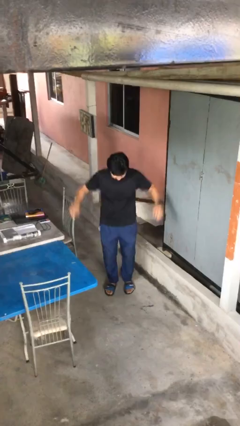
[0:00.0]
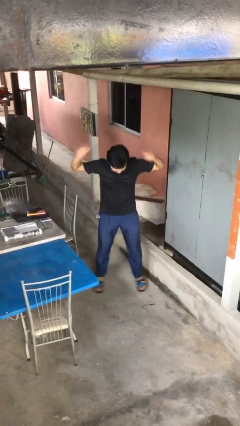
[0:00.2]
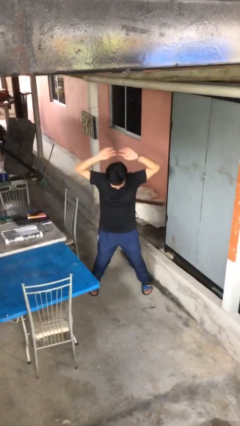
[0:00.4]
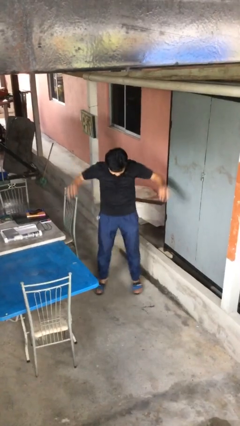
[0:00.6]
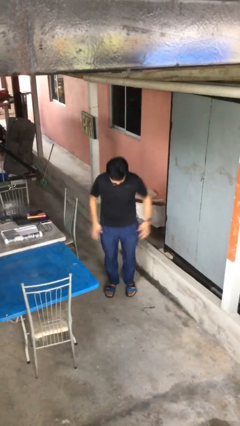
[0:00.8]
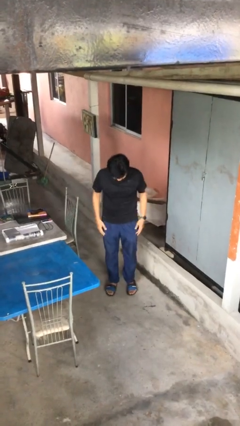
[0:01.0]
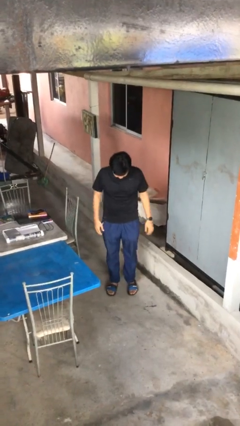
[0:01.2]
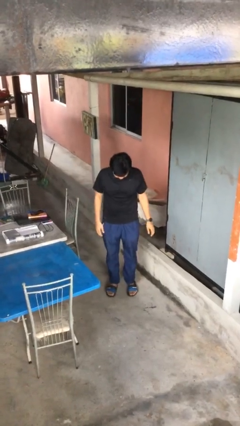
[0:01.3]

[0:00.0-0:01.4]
person exercises with jumping jacks

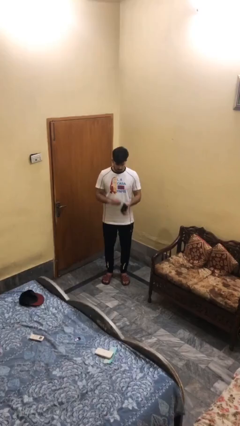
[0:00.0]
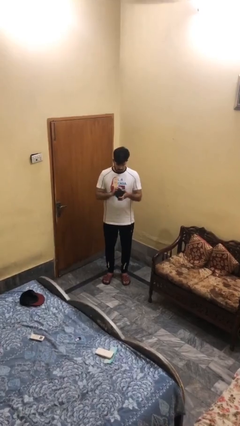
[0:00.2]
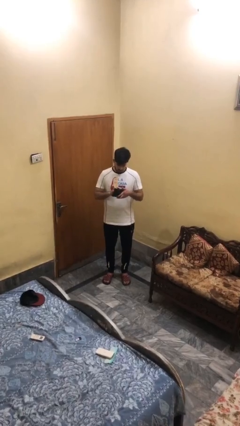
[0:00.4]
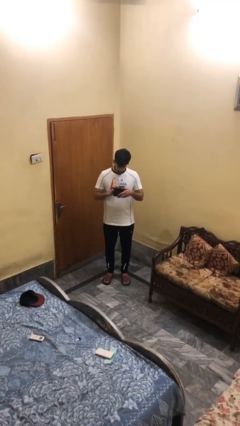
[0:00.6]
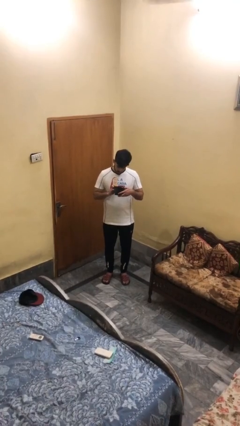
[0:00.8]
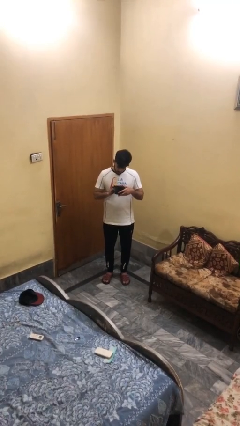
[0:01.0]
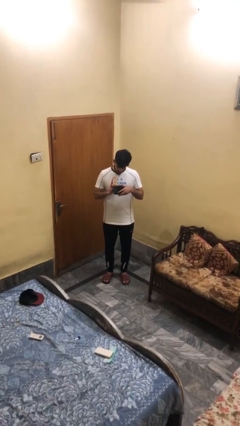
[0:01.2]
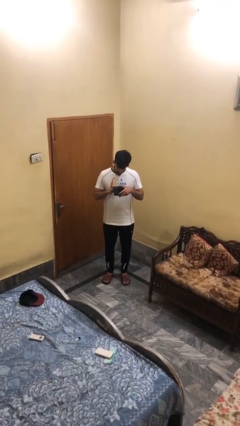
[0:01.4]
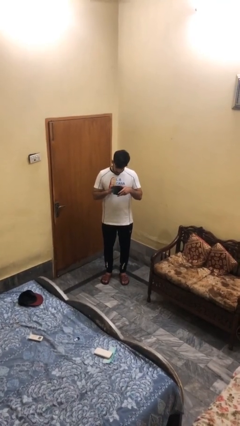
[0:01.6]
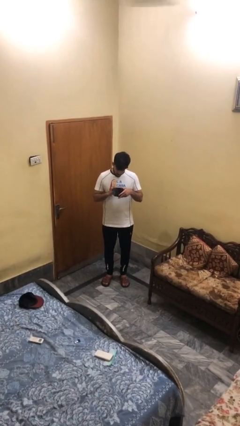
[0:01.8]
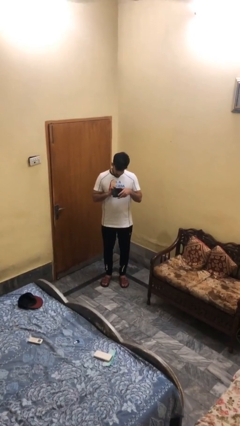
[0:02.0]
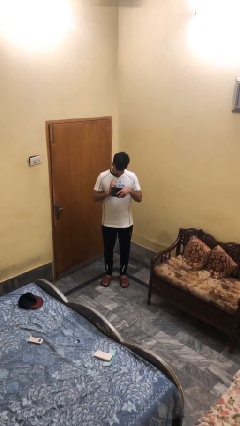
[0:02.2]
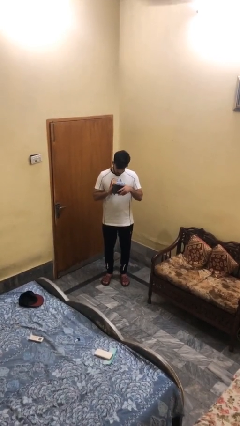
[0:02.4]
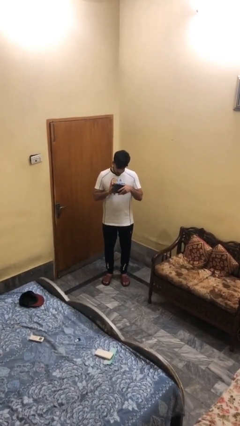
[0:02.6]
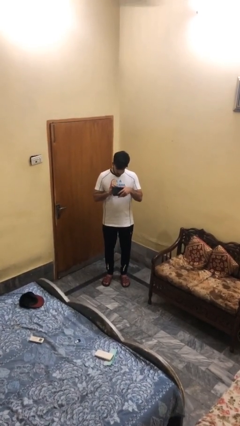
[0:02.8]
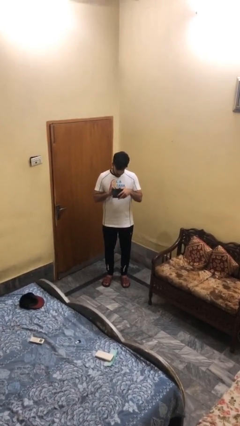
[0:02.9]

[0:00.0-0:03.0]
person searches in purse

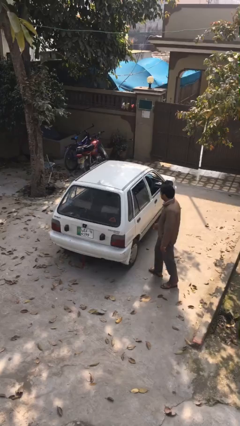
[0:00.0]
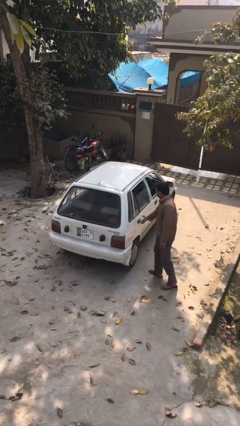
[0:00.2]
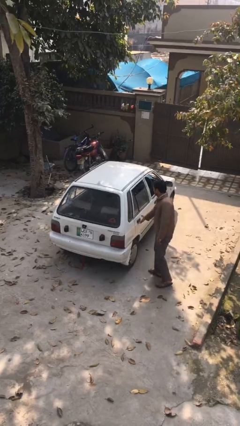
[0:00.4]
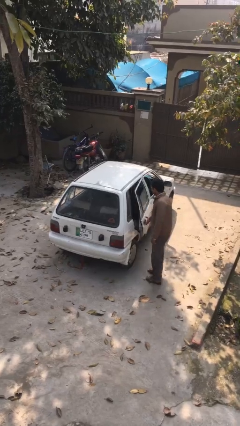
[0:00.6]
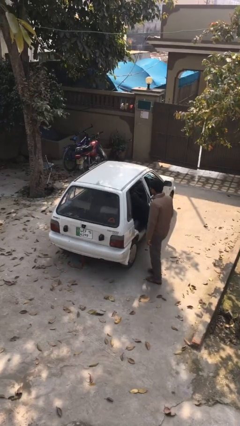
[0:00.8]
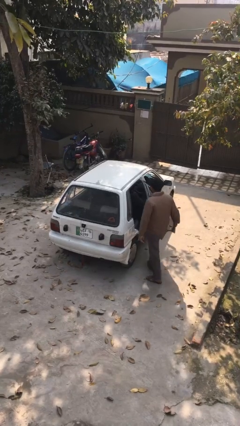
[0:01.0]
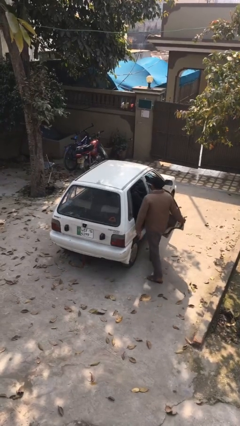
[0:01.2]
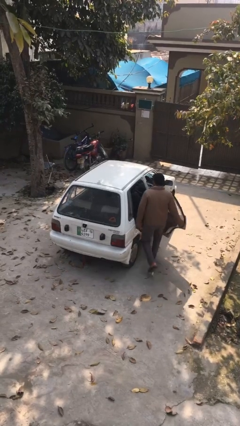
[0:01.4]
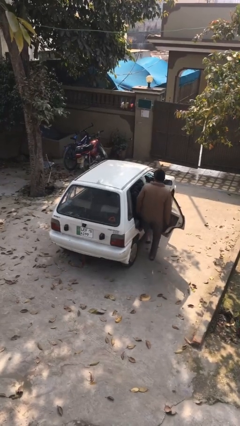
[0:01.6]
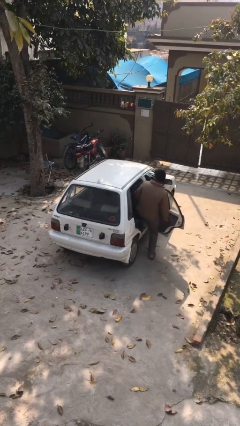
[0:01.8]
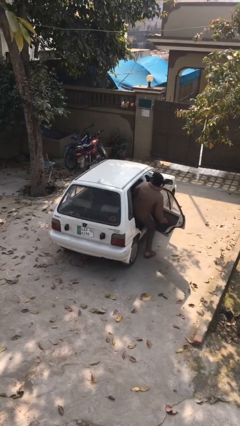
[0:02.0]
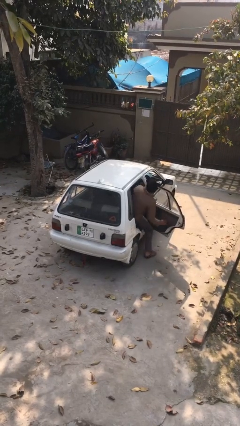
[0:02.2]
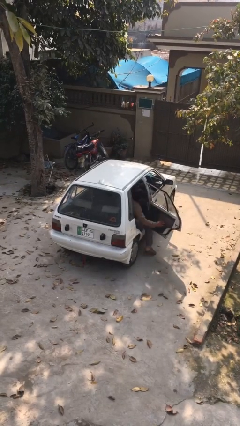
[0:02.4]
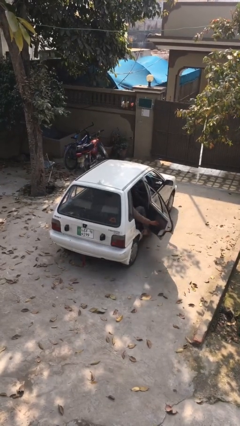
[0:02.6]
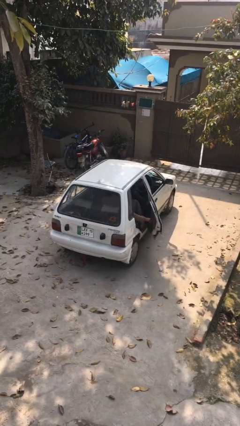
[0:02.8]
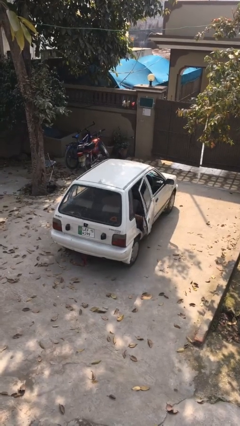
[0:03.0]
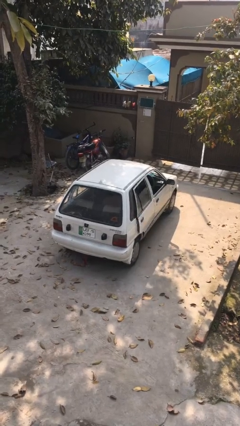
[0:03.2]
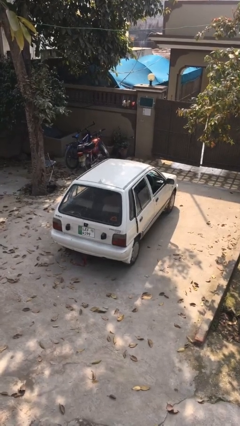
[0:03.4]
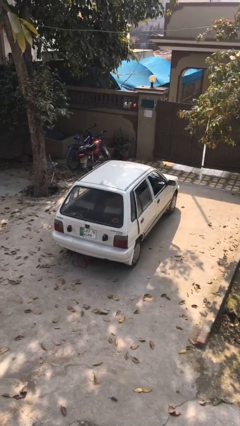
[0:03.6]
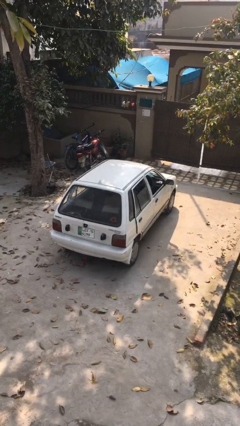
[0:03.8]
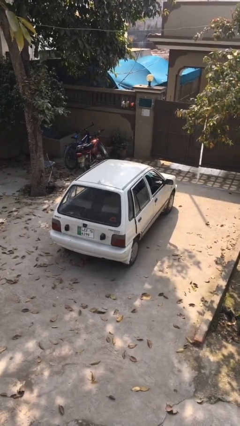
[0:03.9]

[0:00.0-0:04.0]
car picks up person

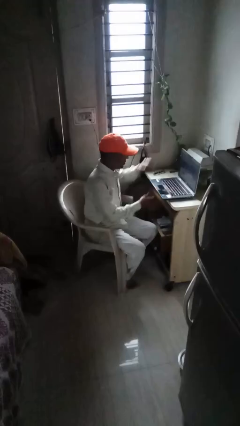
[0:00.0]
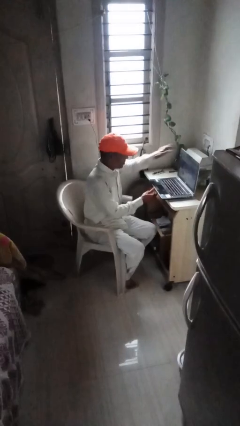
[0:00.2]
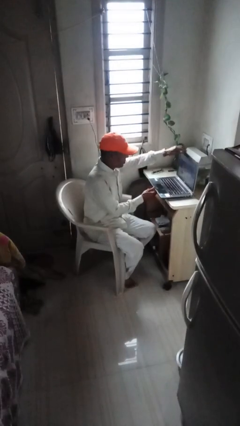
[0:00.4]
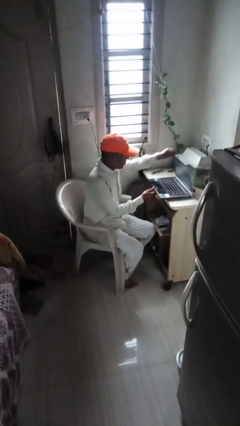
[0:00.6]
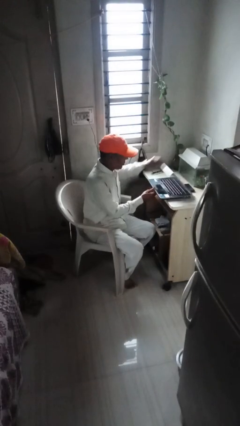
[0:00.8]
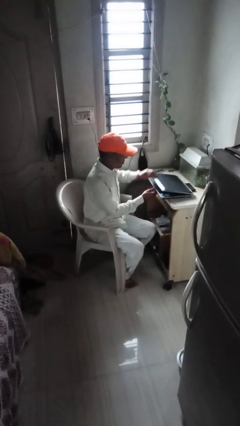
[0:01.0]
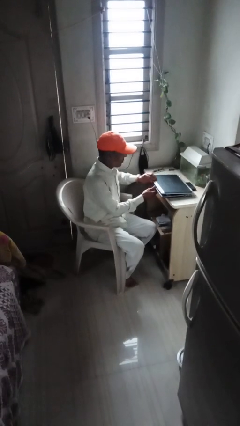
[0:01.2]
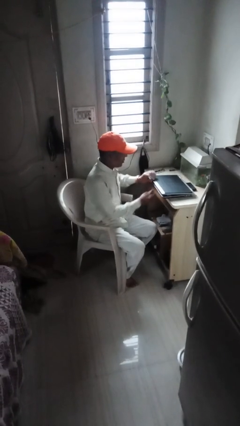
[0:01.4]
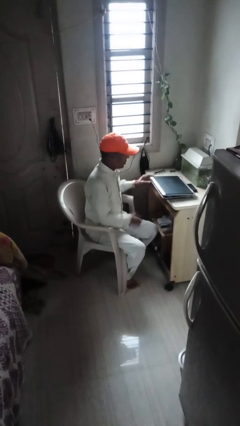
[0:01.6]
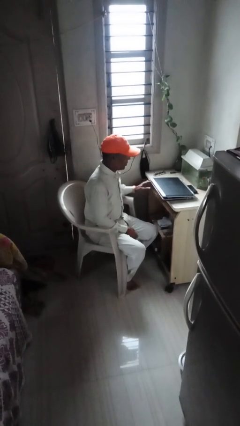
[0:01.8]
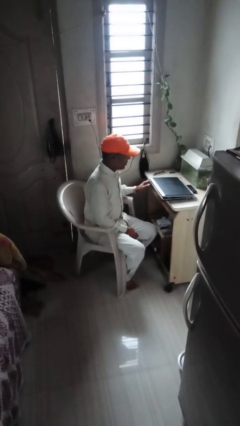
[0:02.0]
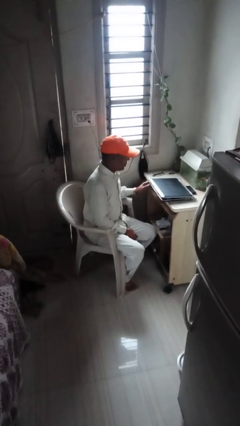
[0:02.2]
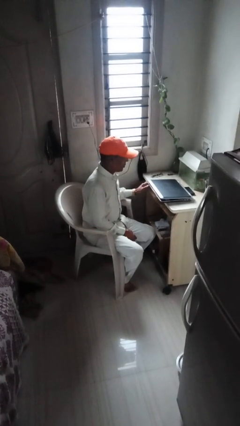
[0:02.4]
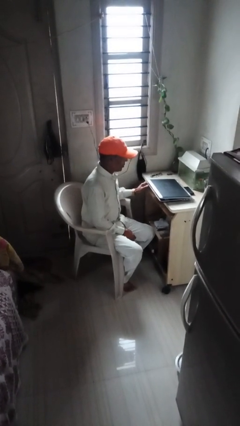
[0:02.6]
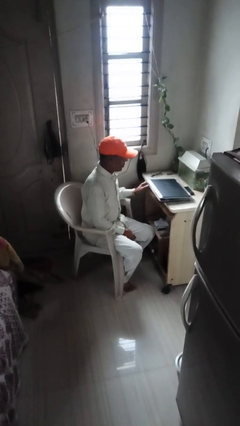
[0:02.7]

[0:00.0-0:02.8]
person closes laptop

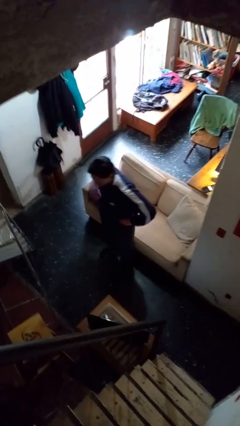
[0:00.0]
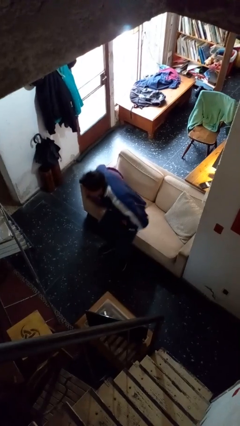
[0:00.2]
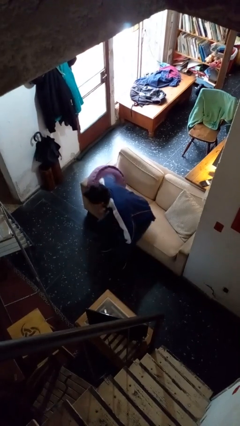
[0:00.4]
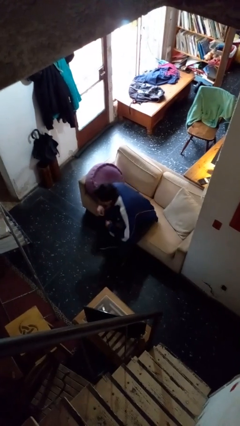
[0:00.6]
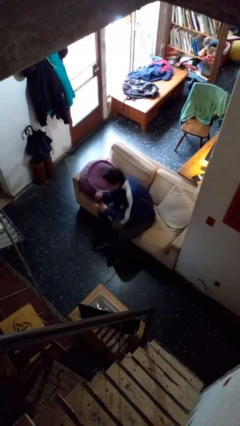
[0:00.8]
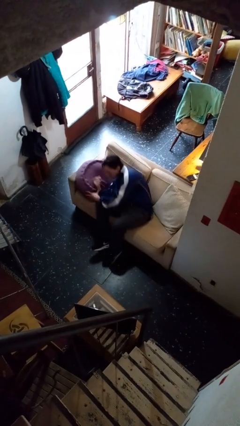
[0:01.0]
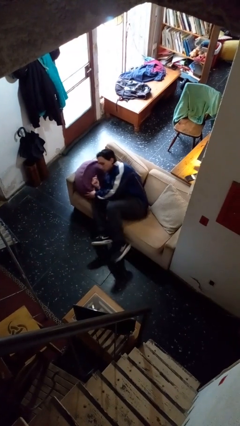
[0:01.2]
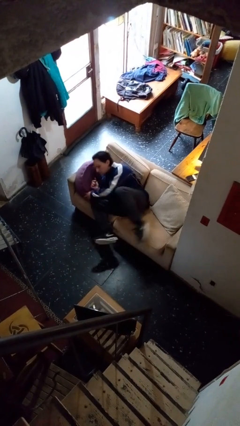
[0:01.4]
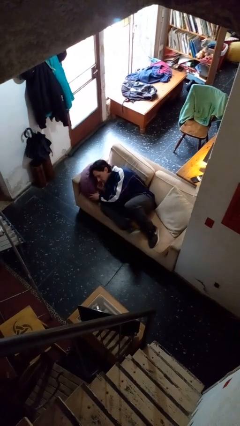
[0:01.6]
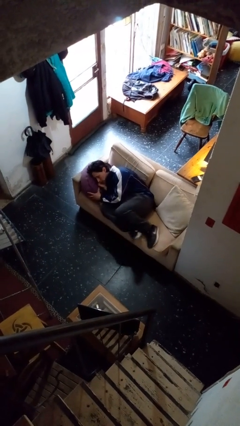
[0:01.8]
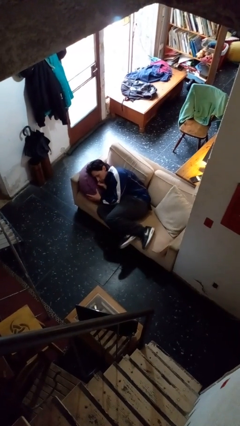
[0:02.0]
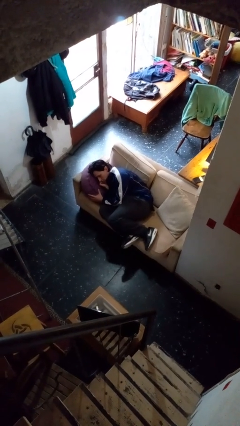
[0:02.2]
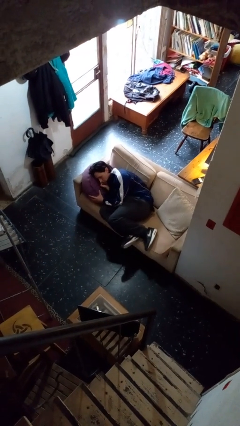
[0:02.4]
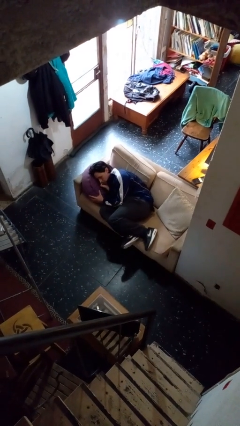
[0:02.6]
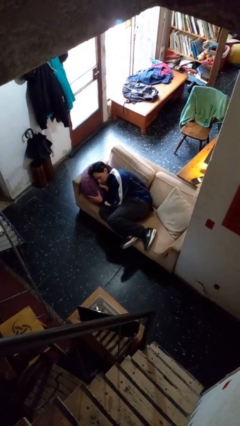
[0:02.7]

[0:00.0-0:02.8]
person lies down on couch

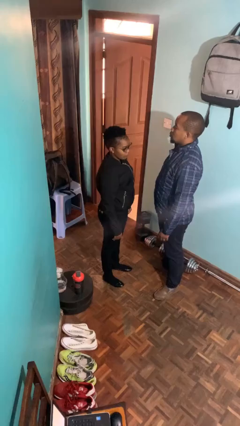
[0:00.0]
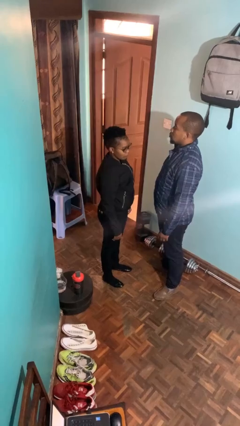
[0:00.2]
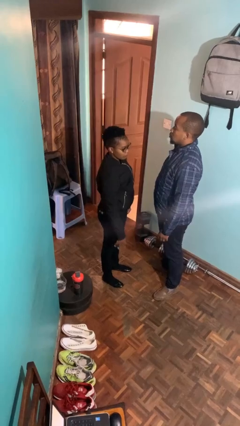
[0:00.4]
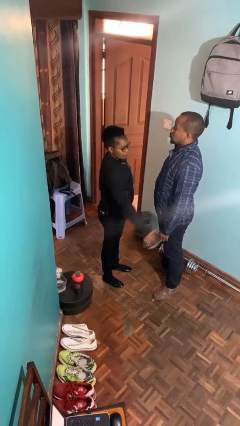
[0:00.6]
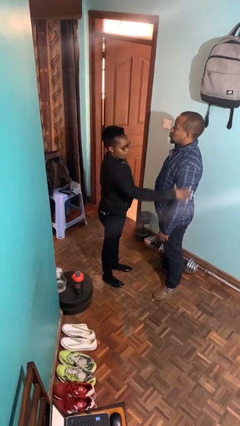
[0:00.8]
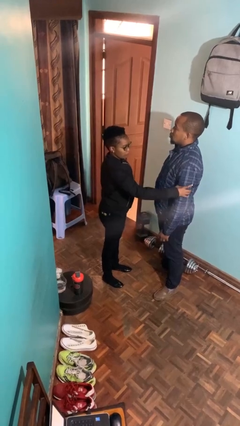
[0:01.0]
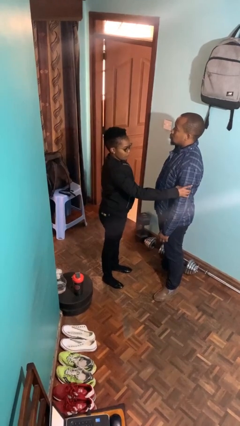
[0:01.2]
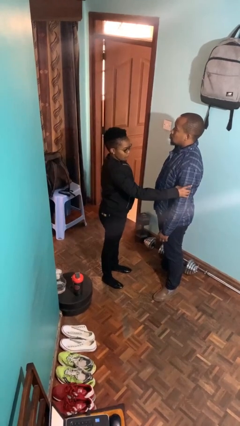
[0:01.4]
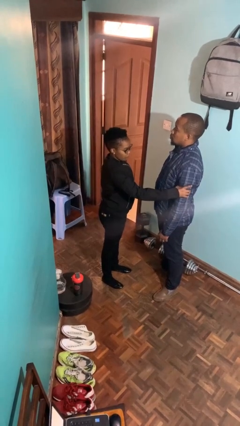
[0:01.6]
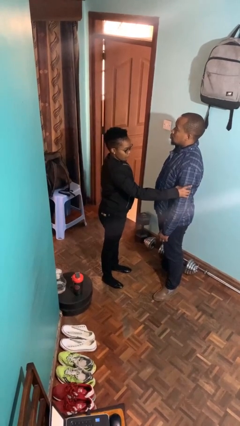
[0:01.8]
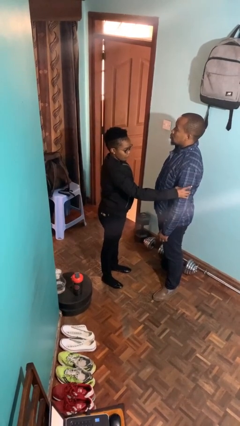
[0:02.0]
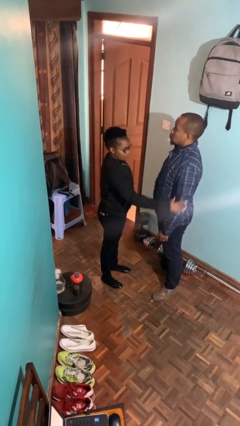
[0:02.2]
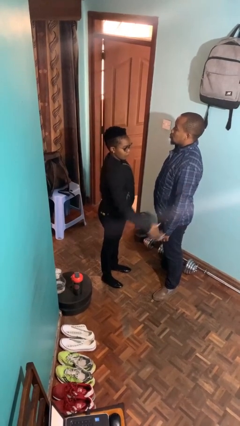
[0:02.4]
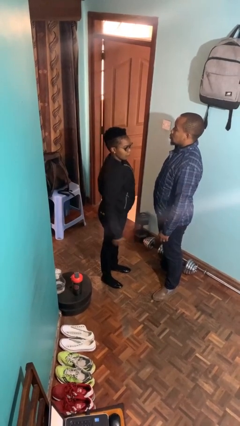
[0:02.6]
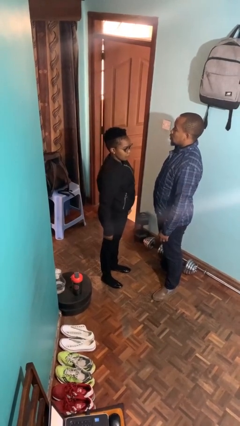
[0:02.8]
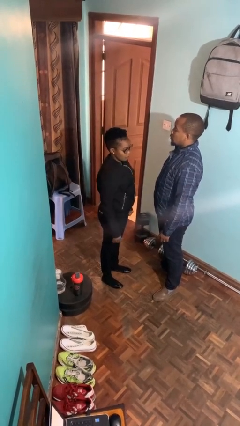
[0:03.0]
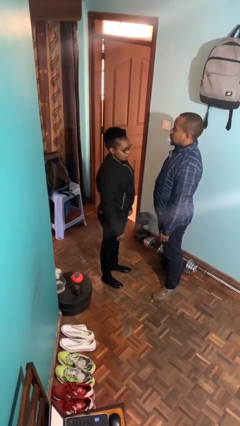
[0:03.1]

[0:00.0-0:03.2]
person grabs person by bicep
